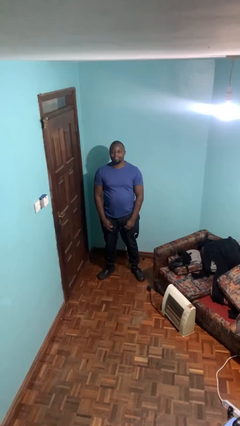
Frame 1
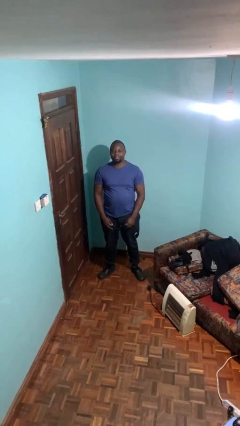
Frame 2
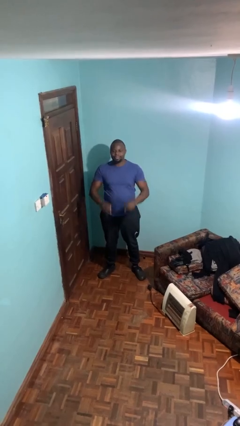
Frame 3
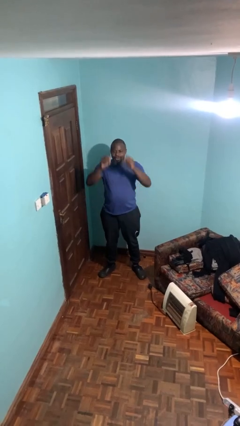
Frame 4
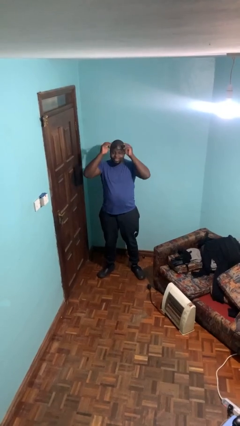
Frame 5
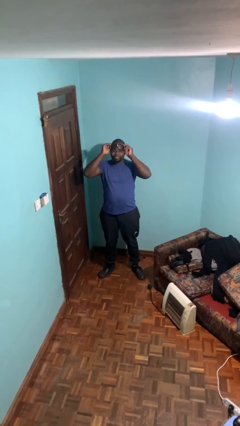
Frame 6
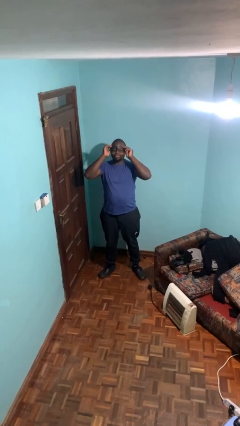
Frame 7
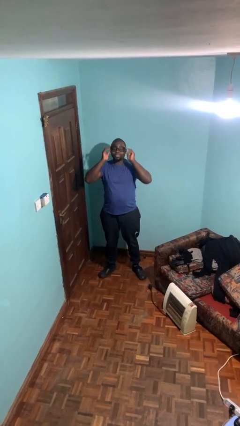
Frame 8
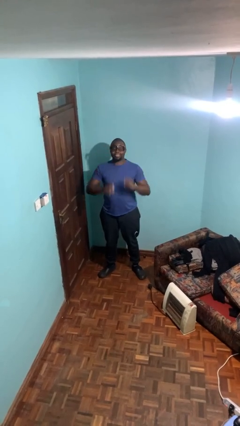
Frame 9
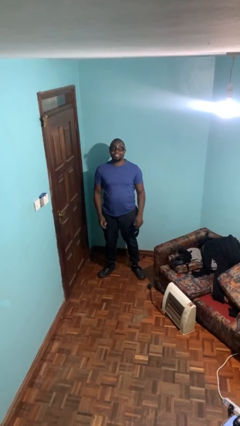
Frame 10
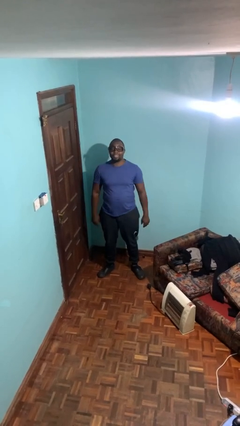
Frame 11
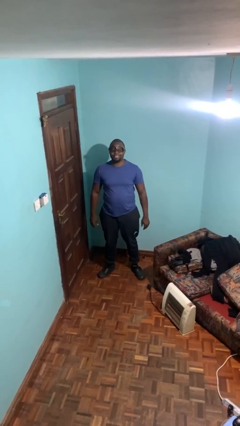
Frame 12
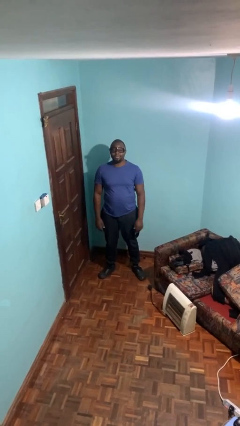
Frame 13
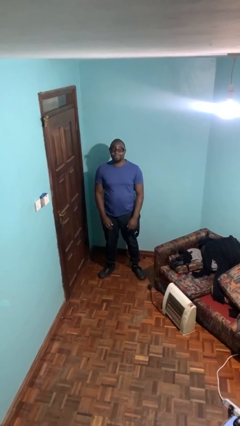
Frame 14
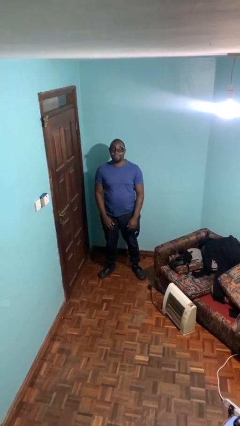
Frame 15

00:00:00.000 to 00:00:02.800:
person puts on glasses

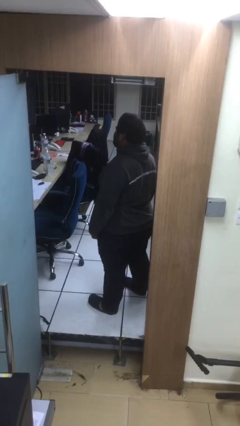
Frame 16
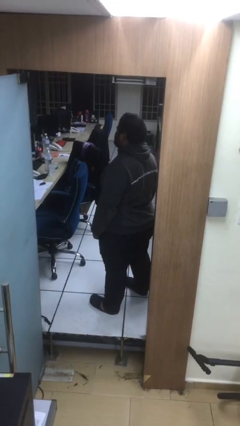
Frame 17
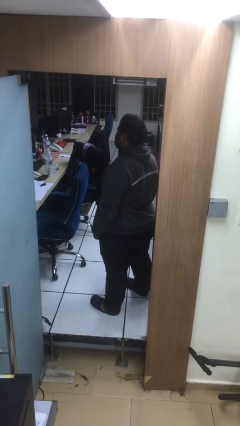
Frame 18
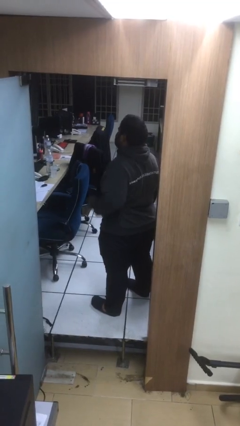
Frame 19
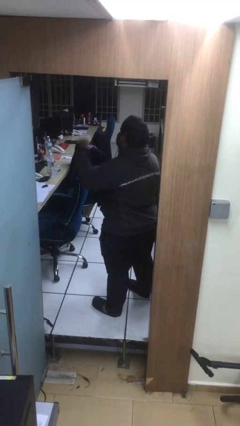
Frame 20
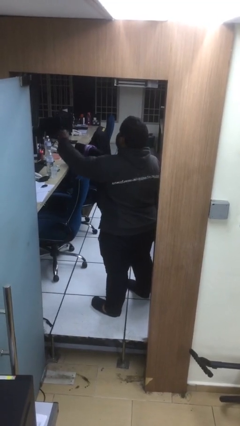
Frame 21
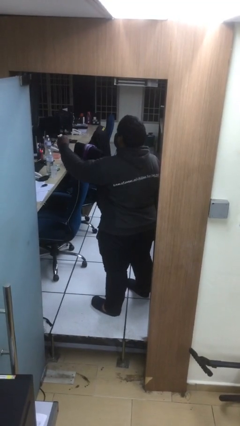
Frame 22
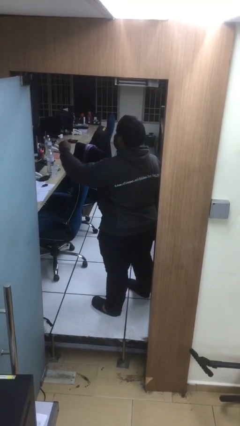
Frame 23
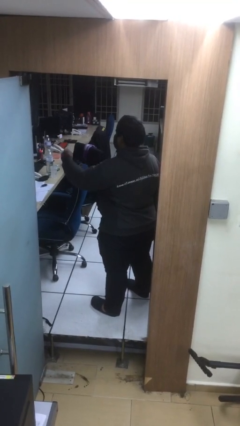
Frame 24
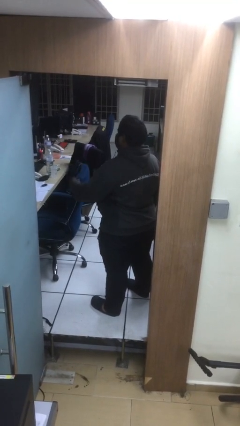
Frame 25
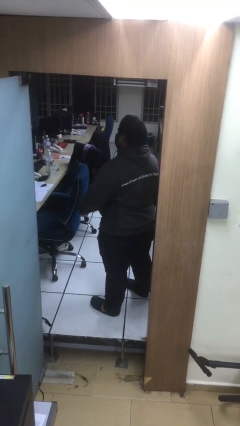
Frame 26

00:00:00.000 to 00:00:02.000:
person punches

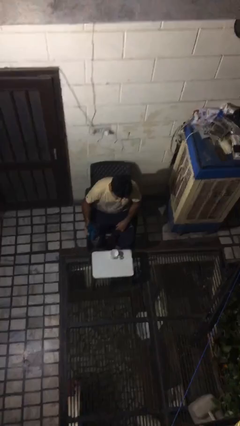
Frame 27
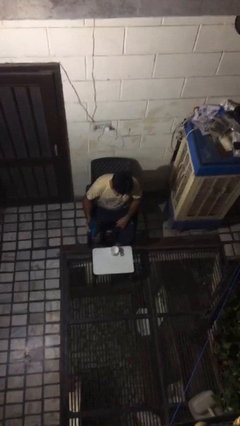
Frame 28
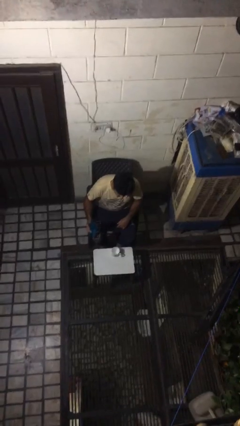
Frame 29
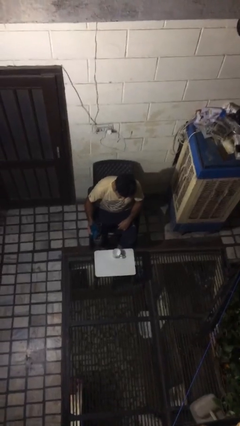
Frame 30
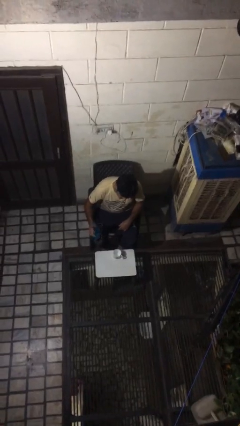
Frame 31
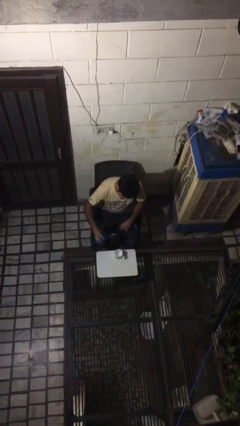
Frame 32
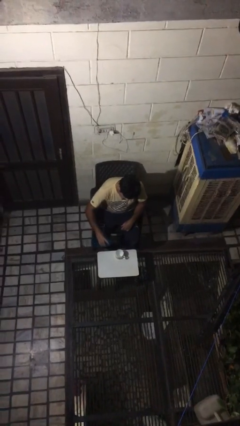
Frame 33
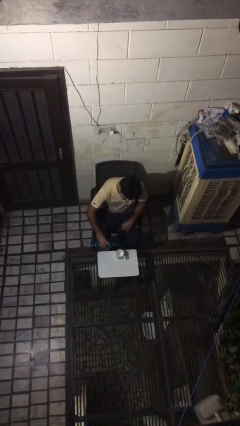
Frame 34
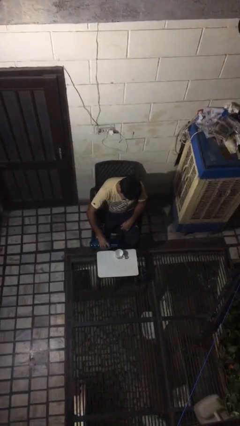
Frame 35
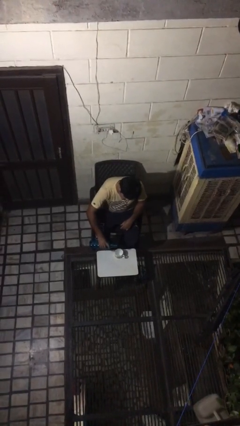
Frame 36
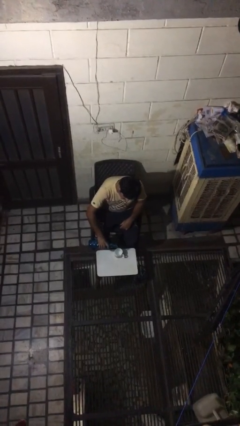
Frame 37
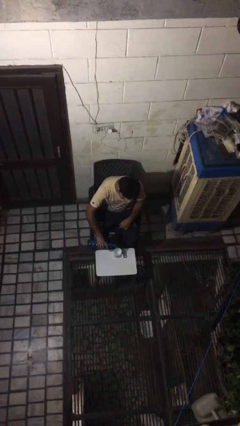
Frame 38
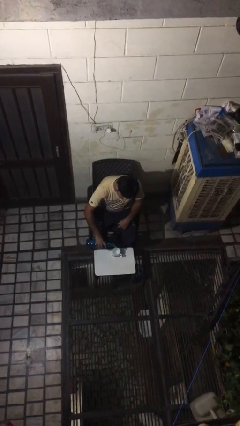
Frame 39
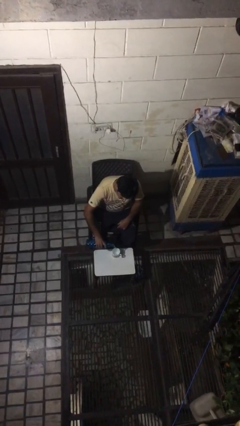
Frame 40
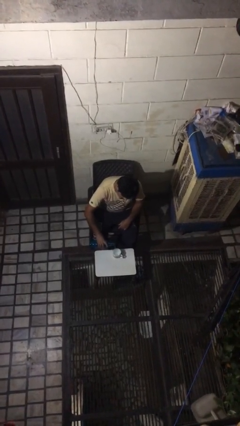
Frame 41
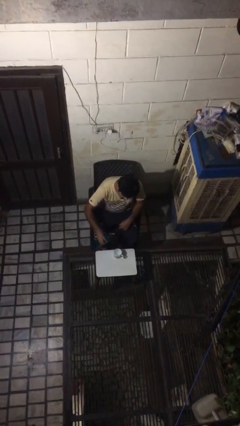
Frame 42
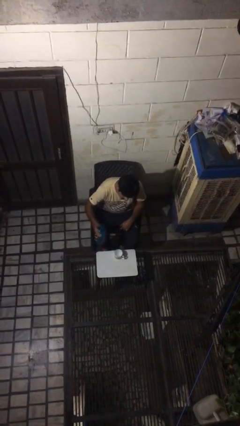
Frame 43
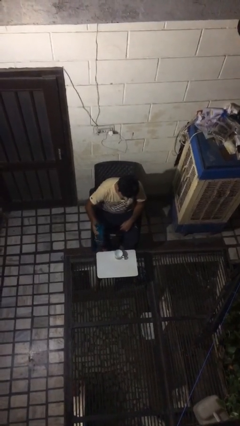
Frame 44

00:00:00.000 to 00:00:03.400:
person pours liquid into cup

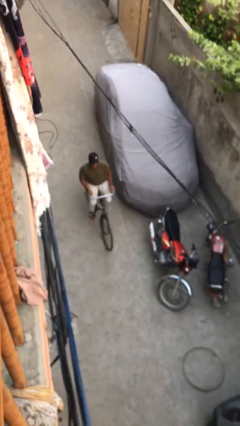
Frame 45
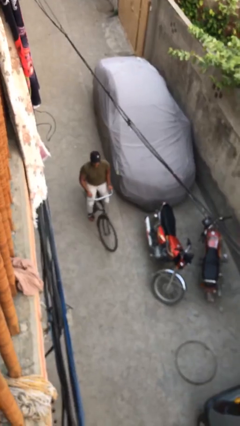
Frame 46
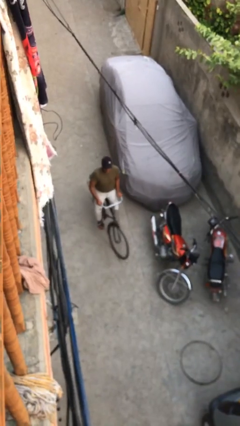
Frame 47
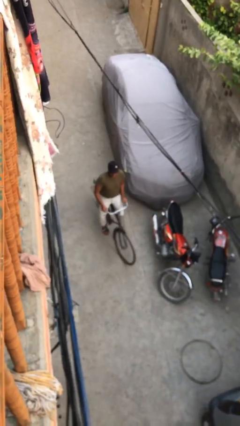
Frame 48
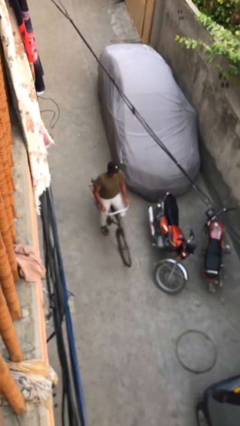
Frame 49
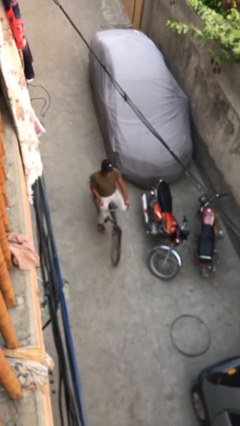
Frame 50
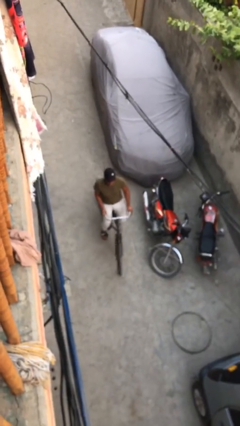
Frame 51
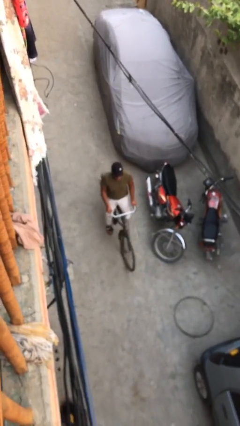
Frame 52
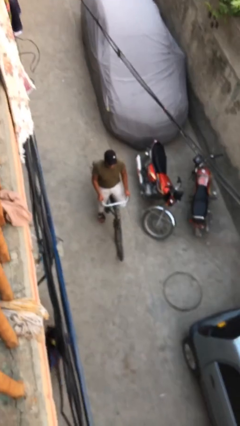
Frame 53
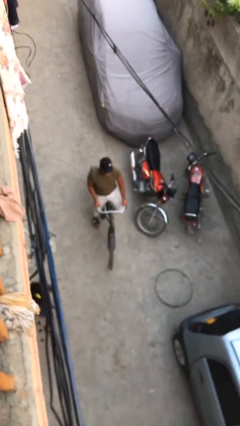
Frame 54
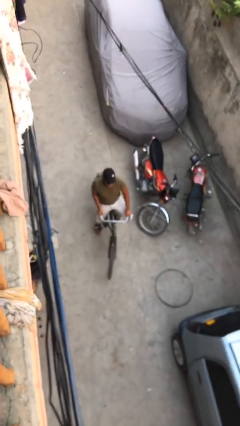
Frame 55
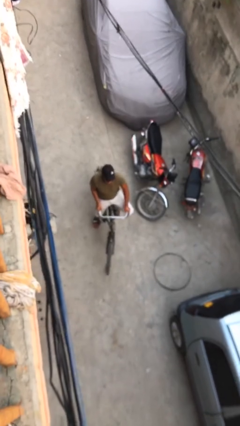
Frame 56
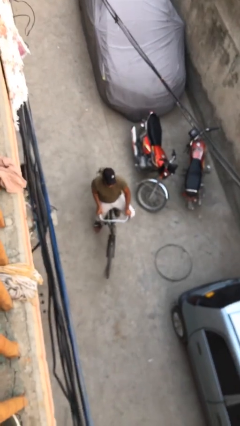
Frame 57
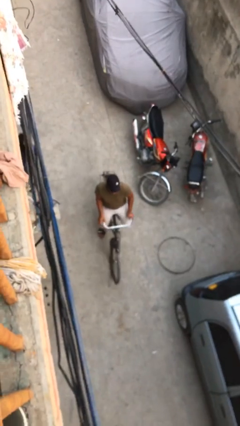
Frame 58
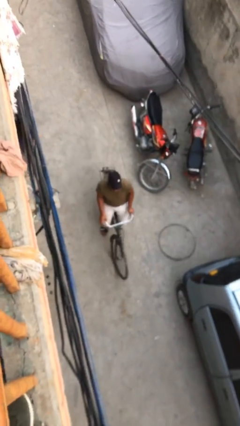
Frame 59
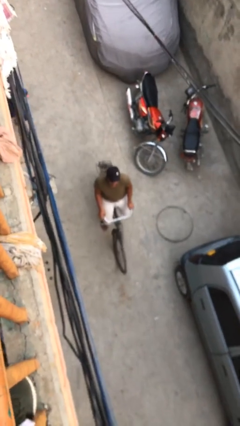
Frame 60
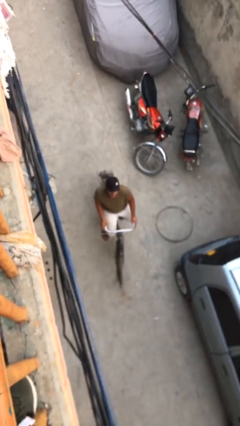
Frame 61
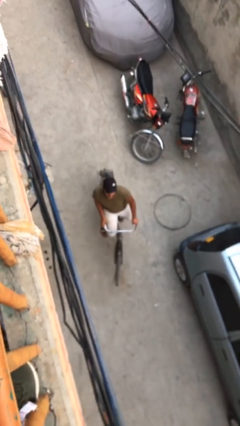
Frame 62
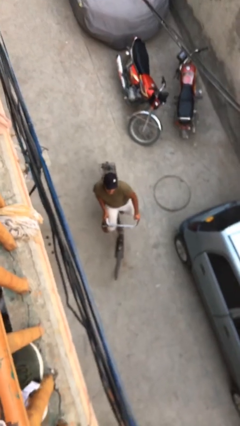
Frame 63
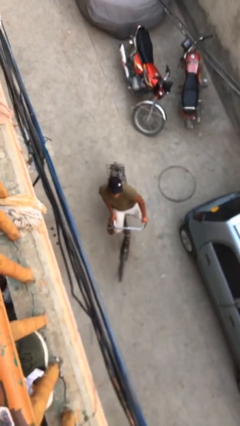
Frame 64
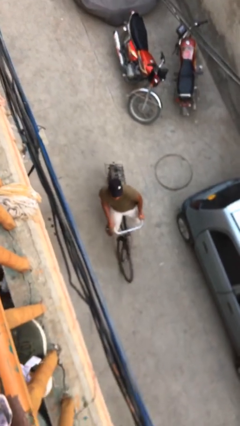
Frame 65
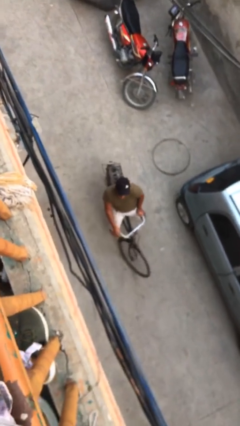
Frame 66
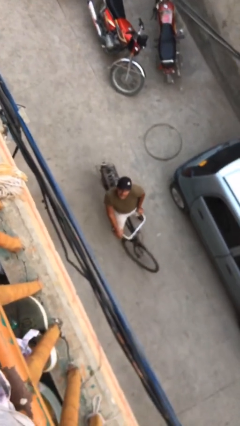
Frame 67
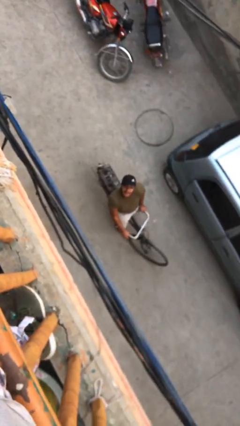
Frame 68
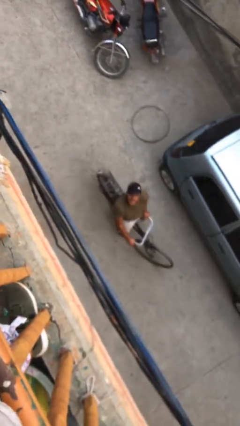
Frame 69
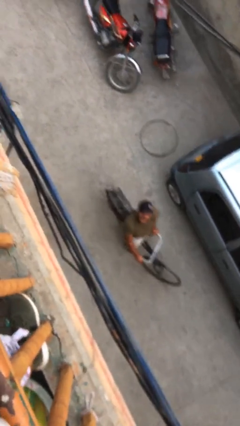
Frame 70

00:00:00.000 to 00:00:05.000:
person rides bicycle

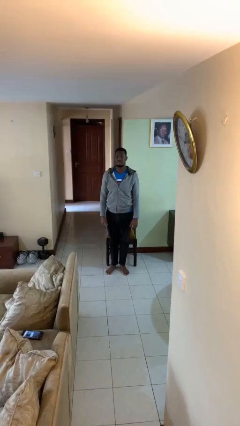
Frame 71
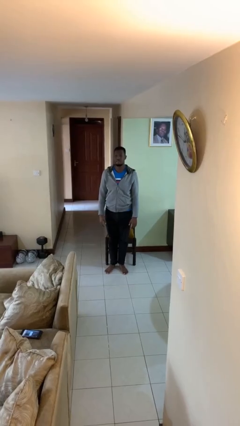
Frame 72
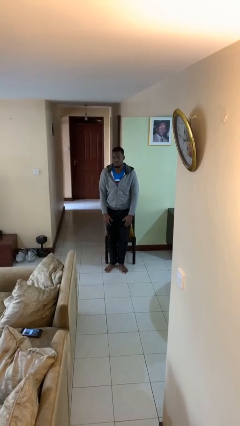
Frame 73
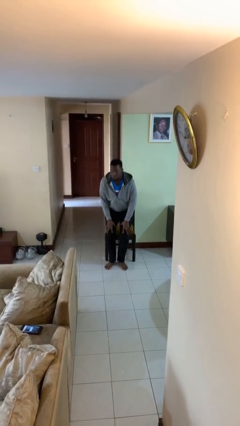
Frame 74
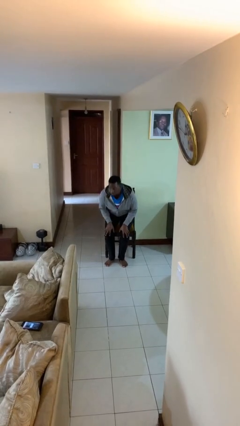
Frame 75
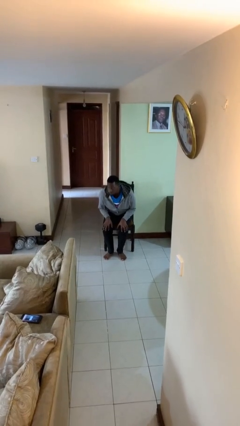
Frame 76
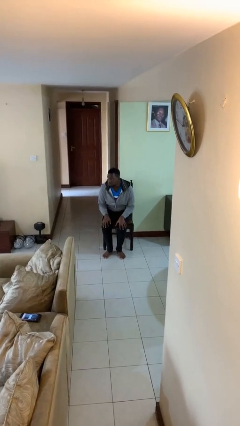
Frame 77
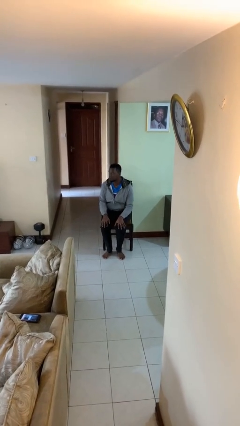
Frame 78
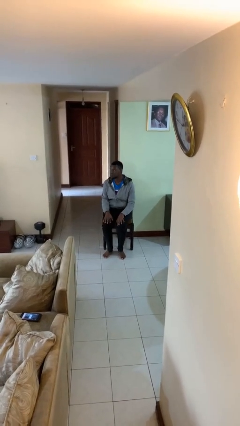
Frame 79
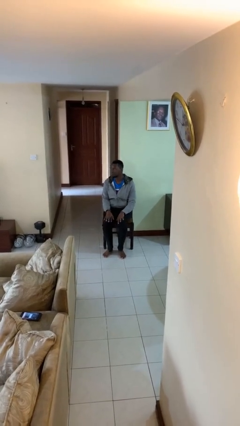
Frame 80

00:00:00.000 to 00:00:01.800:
person sits down

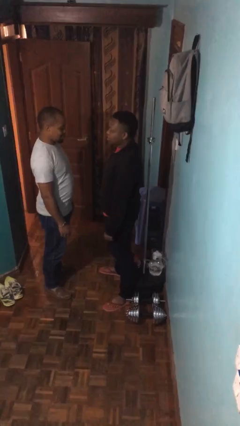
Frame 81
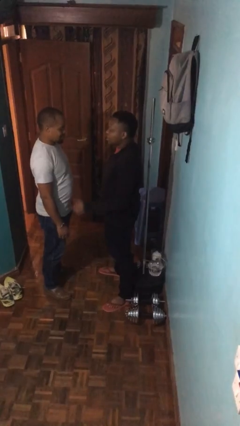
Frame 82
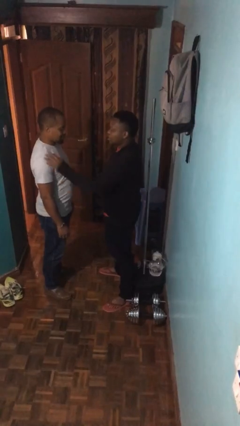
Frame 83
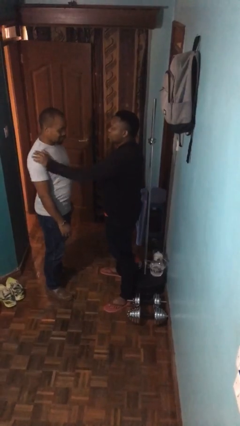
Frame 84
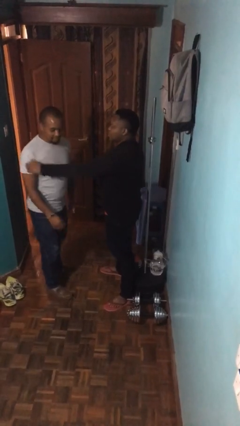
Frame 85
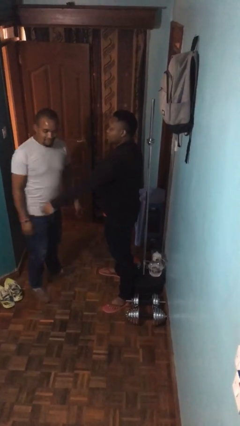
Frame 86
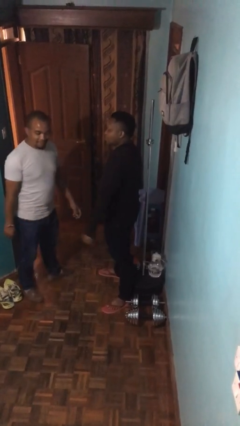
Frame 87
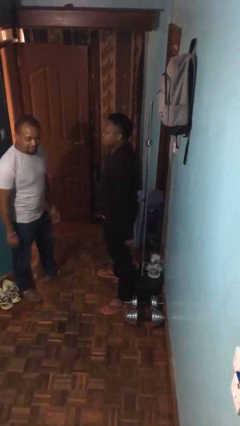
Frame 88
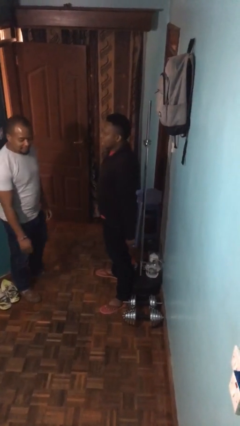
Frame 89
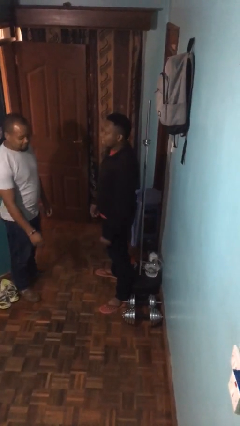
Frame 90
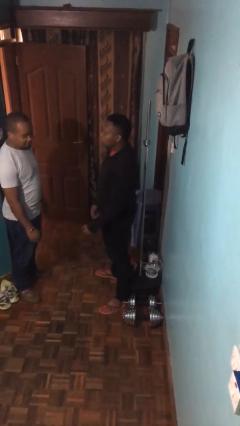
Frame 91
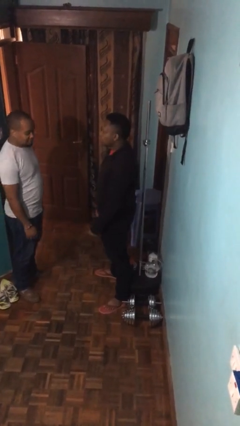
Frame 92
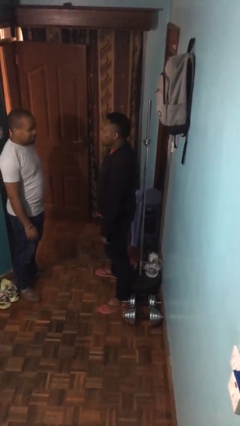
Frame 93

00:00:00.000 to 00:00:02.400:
person shoves person
